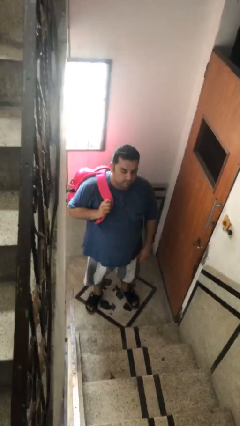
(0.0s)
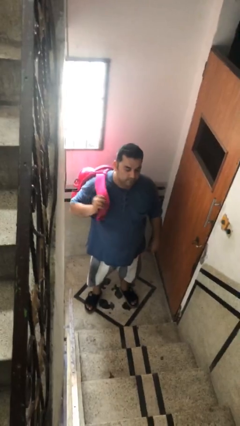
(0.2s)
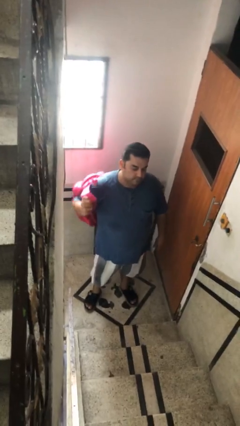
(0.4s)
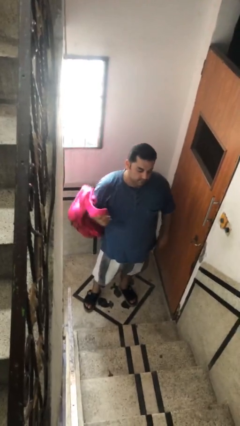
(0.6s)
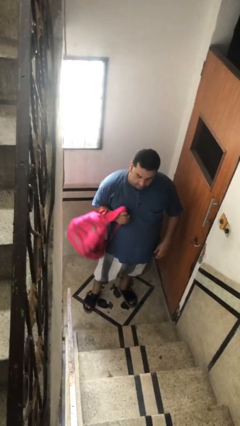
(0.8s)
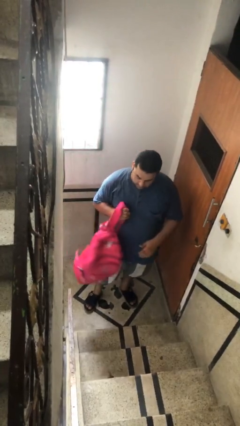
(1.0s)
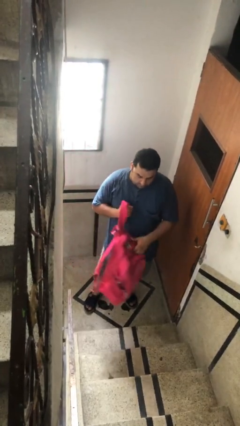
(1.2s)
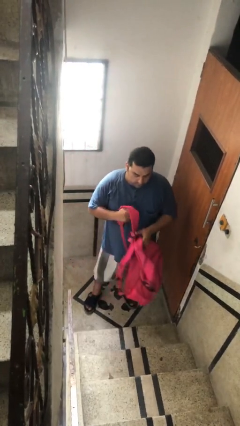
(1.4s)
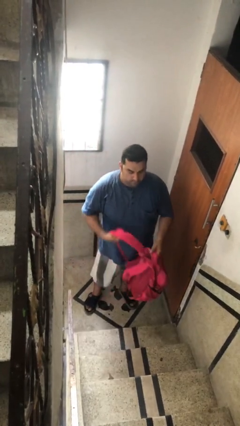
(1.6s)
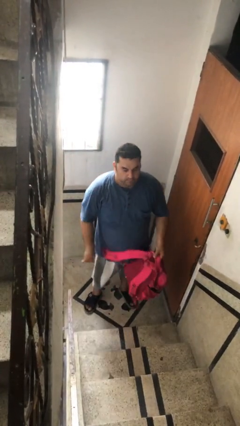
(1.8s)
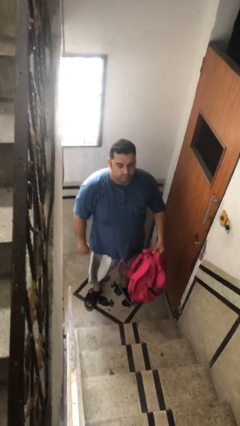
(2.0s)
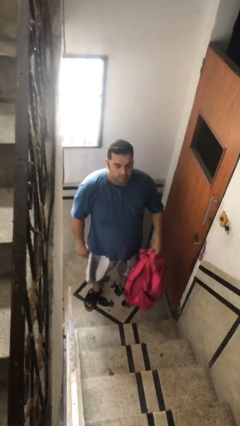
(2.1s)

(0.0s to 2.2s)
person takes off backpack

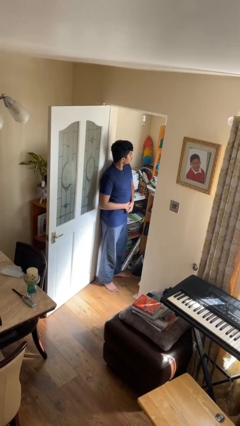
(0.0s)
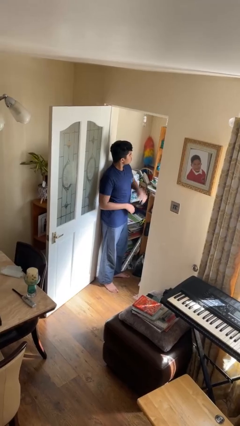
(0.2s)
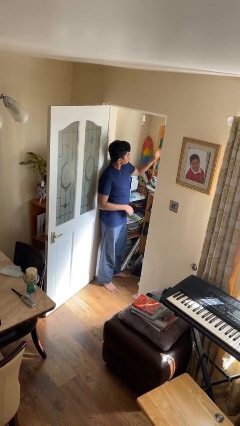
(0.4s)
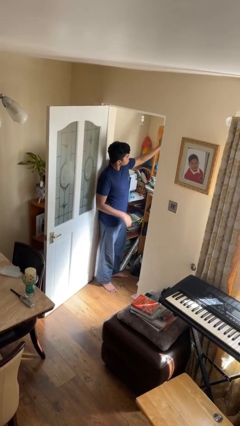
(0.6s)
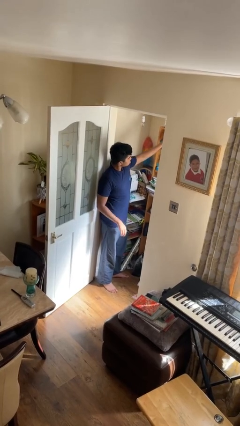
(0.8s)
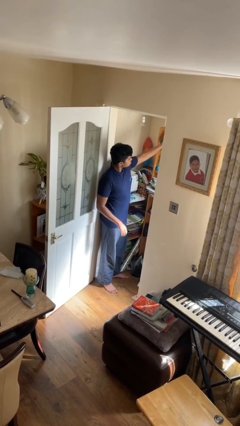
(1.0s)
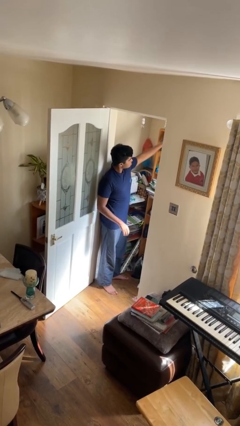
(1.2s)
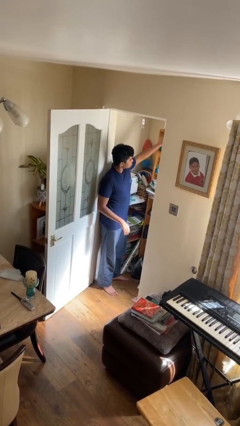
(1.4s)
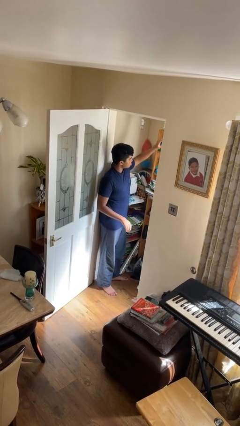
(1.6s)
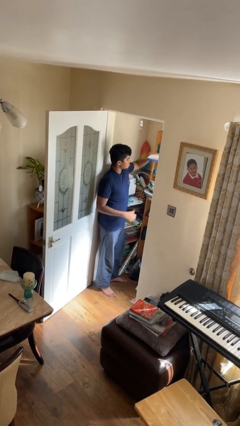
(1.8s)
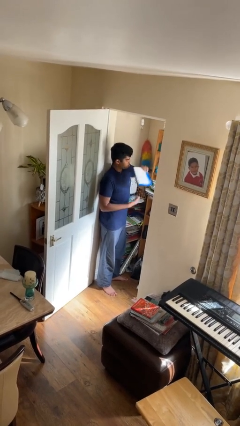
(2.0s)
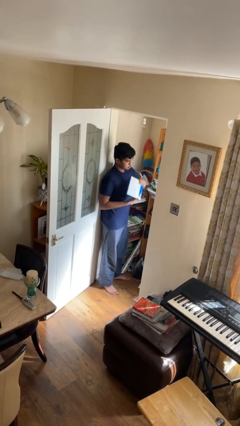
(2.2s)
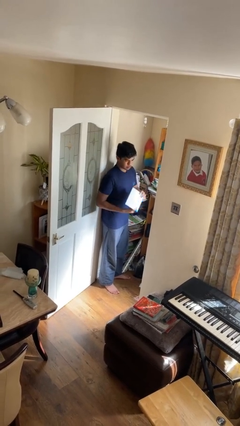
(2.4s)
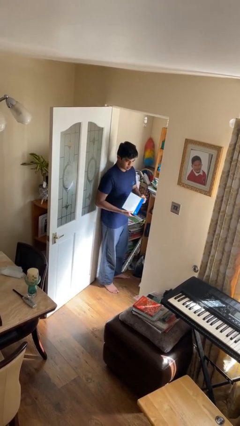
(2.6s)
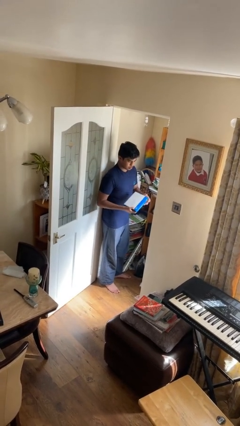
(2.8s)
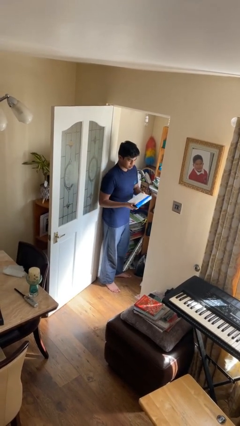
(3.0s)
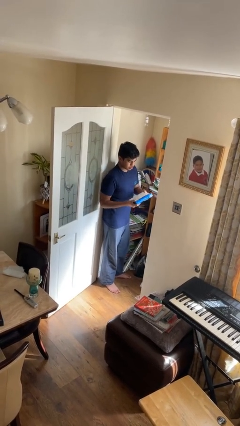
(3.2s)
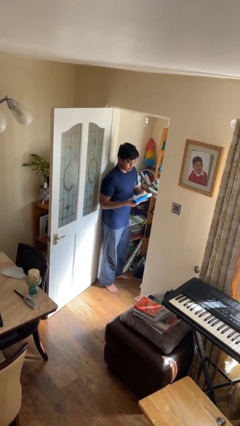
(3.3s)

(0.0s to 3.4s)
person picks up object from shelf

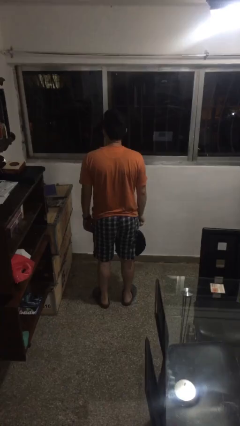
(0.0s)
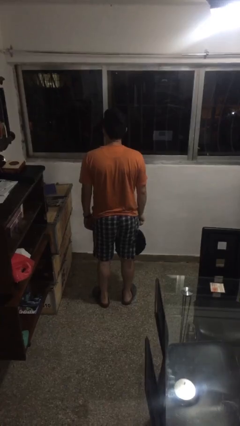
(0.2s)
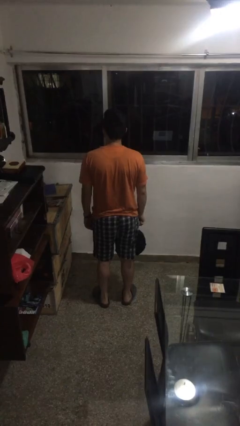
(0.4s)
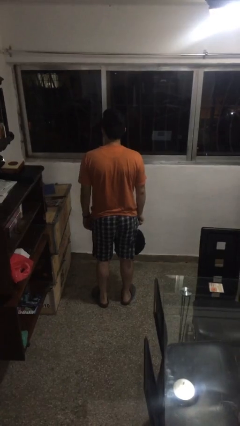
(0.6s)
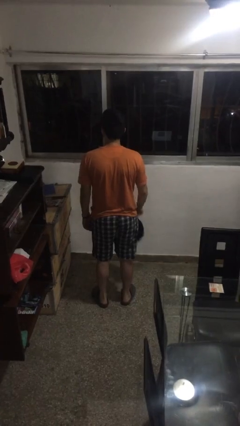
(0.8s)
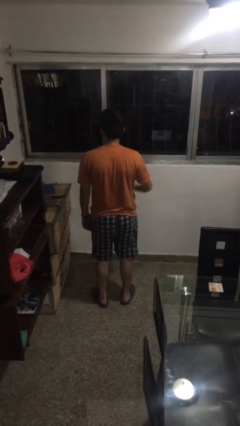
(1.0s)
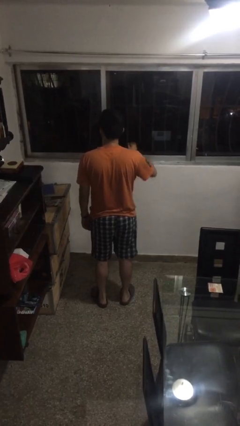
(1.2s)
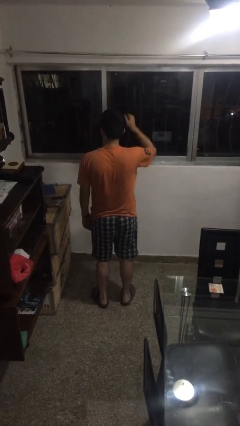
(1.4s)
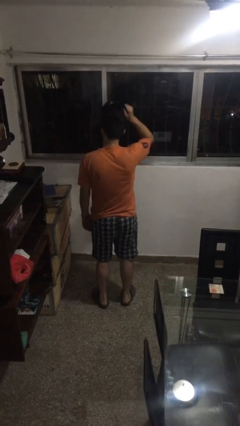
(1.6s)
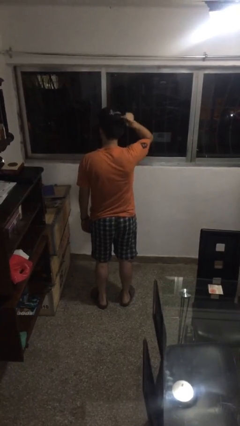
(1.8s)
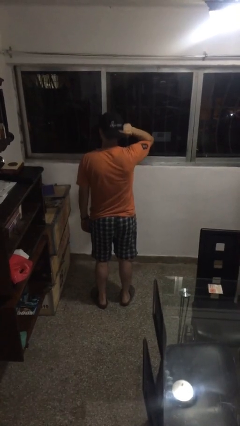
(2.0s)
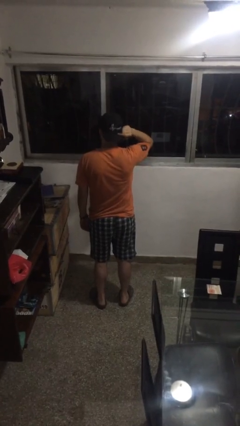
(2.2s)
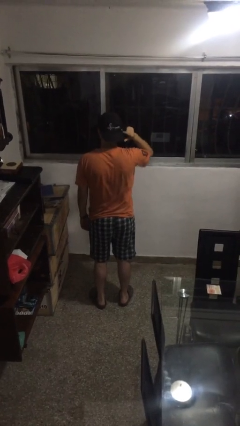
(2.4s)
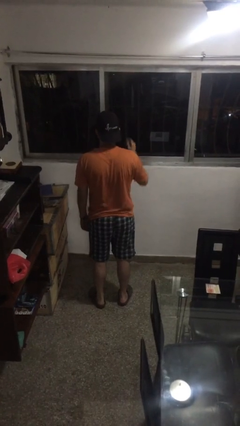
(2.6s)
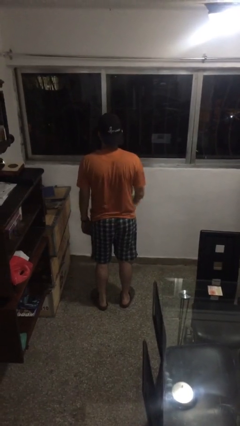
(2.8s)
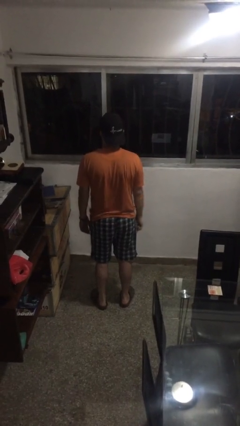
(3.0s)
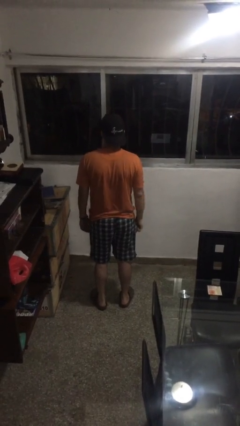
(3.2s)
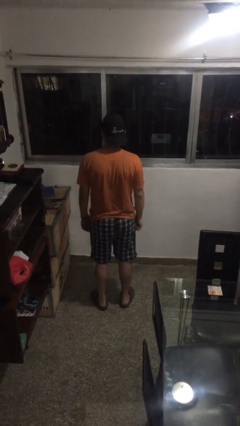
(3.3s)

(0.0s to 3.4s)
person puts on hat

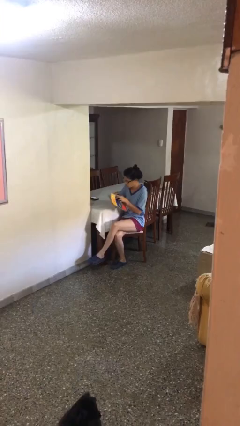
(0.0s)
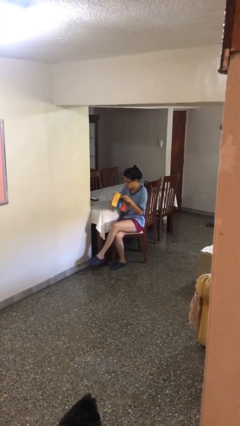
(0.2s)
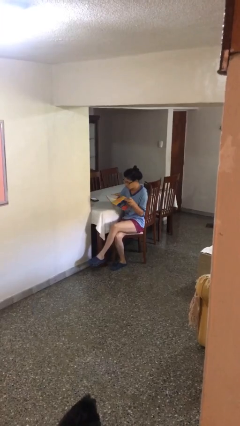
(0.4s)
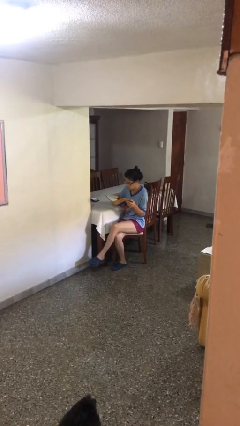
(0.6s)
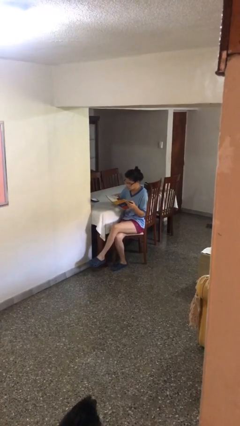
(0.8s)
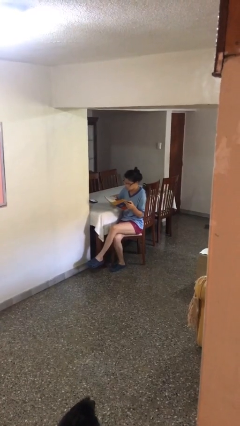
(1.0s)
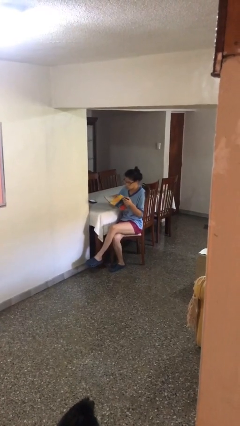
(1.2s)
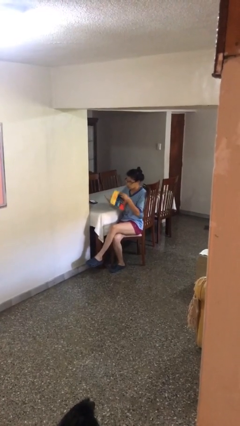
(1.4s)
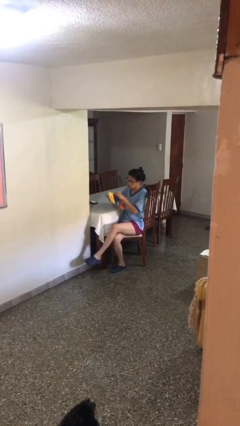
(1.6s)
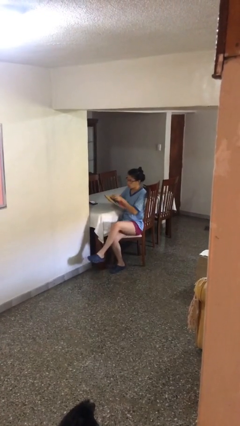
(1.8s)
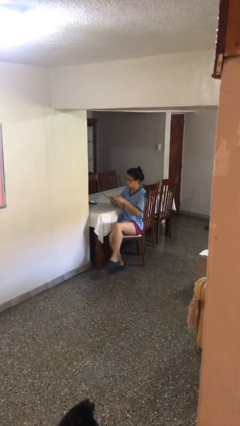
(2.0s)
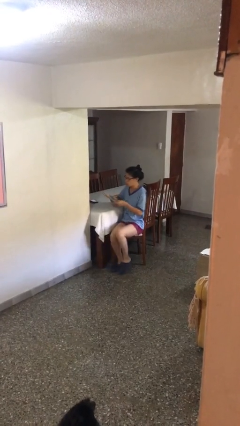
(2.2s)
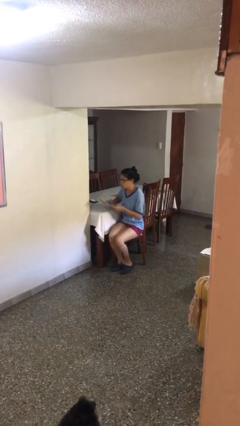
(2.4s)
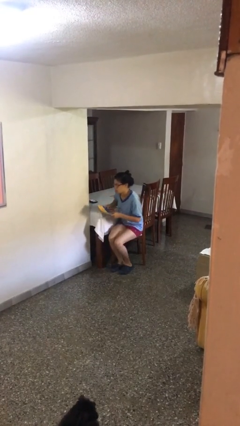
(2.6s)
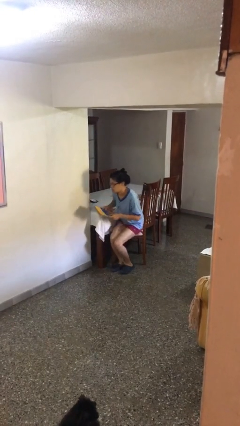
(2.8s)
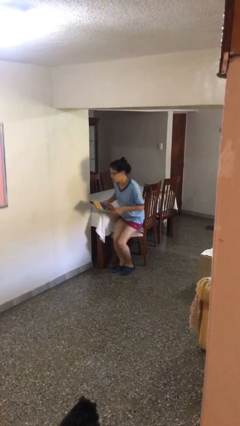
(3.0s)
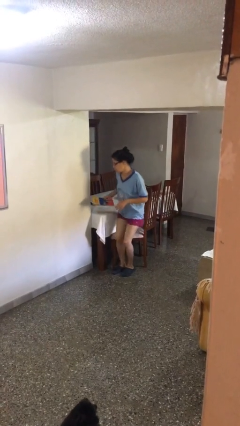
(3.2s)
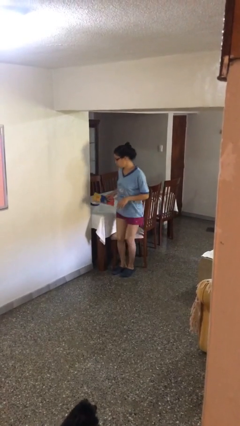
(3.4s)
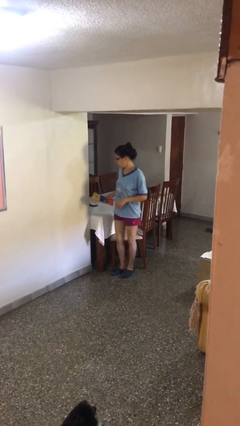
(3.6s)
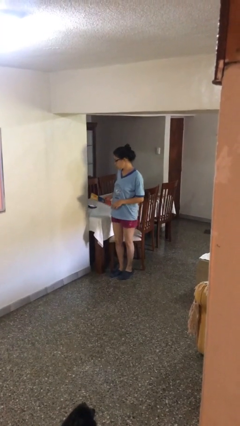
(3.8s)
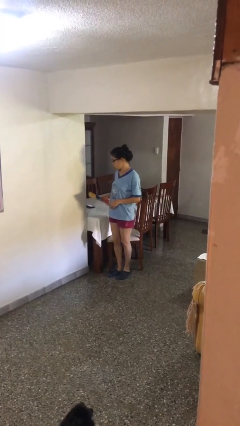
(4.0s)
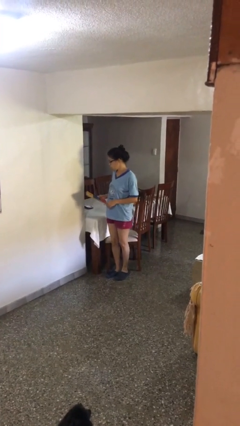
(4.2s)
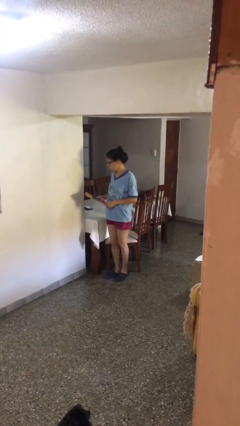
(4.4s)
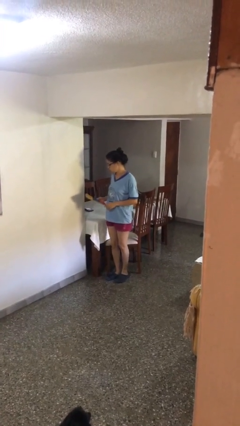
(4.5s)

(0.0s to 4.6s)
person stands up

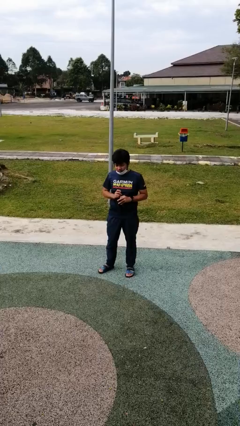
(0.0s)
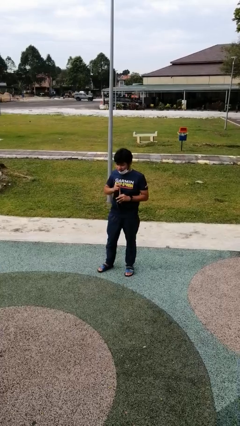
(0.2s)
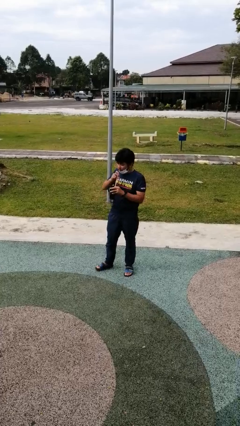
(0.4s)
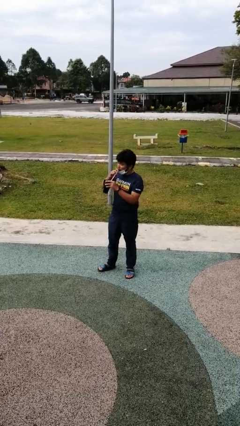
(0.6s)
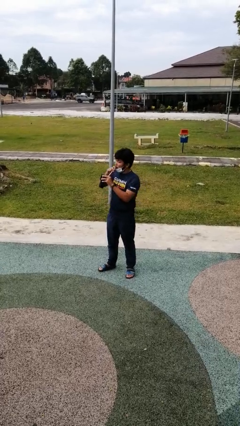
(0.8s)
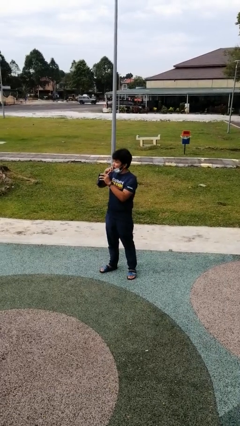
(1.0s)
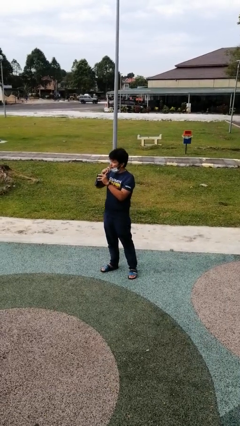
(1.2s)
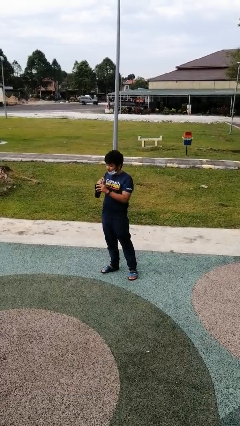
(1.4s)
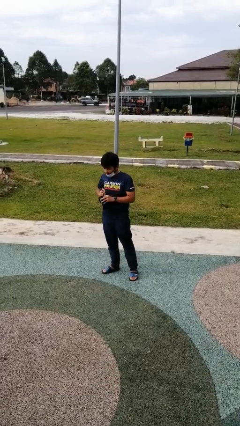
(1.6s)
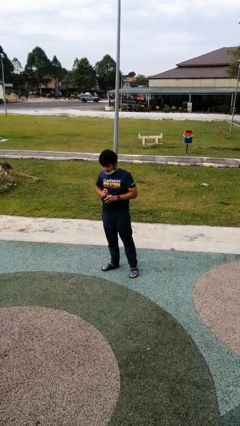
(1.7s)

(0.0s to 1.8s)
person drinks from straw

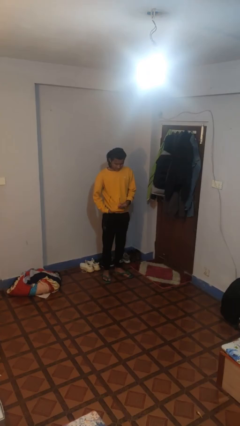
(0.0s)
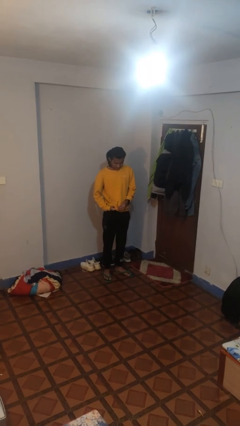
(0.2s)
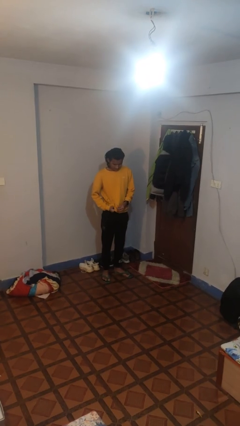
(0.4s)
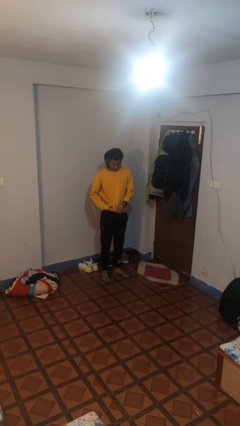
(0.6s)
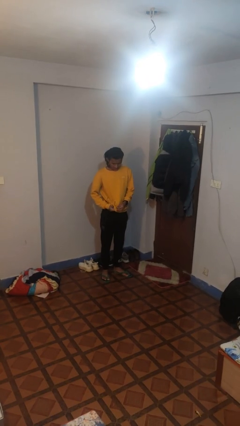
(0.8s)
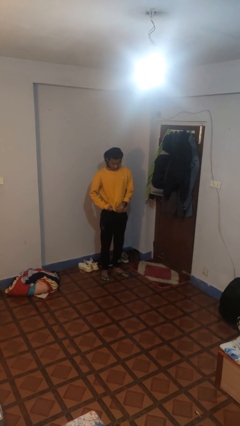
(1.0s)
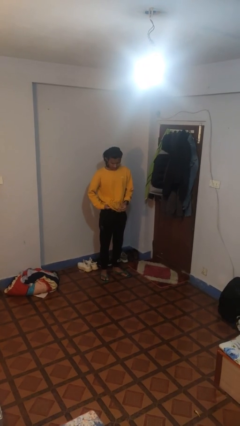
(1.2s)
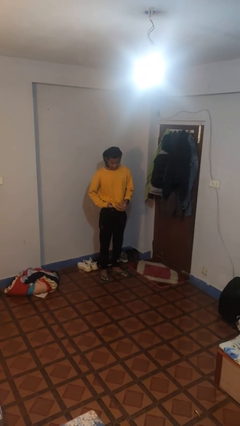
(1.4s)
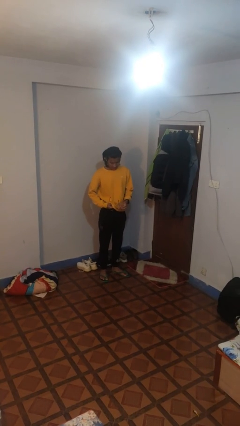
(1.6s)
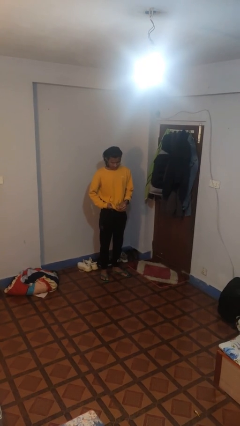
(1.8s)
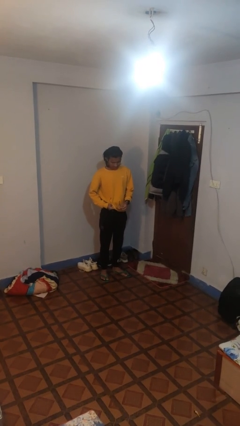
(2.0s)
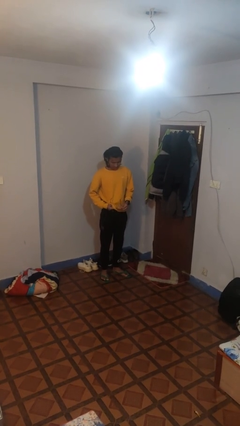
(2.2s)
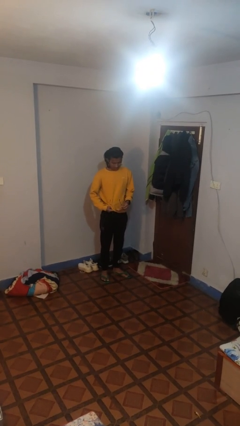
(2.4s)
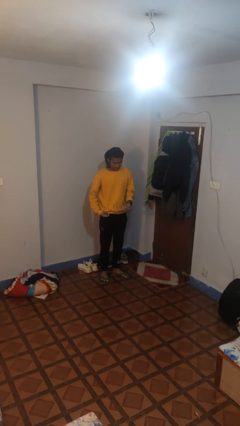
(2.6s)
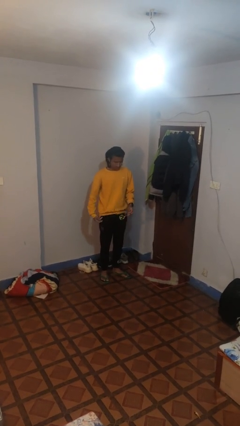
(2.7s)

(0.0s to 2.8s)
person cleans eyeglasses
